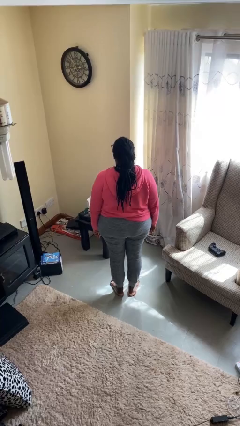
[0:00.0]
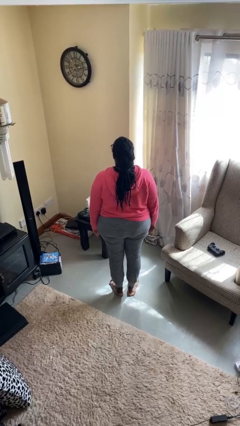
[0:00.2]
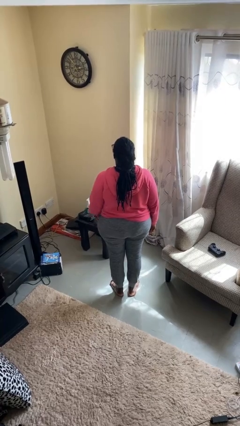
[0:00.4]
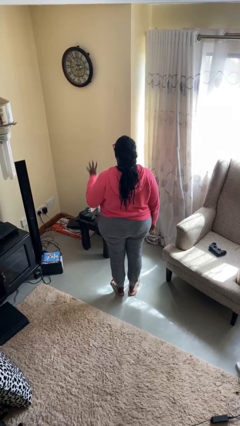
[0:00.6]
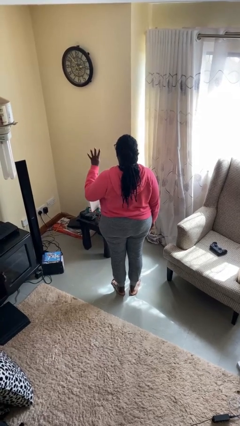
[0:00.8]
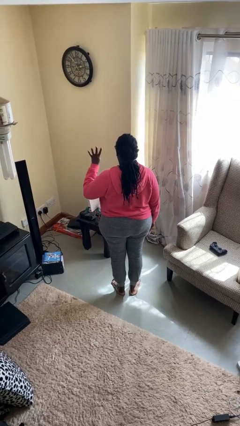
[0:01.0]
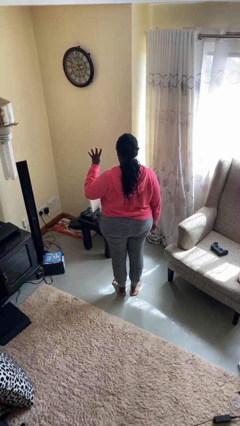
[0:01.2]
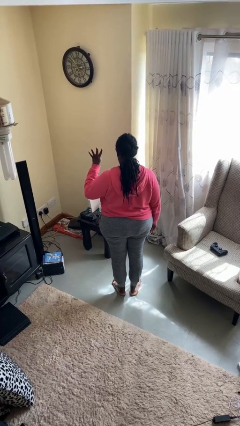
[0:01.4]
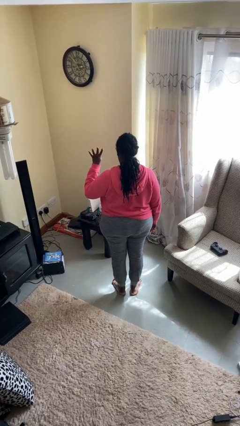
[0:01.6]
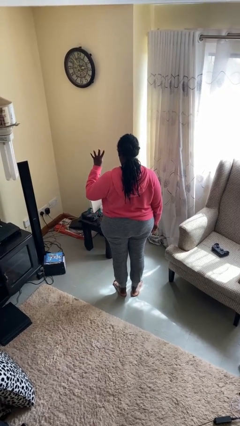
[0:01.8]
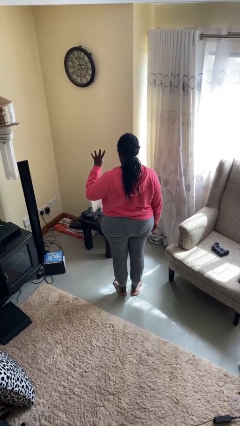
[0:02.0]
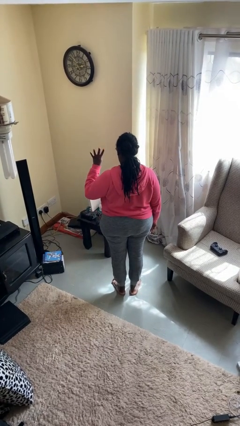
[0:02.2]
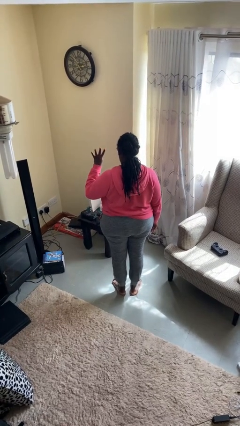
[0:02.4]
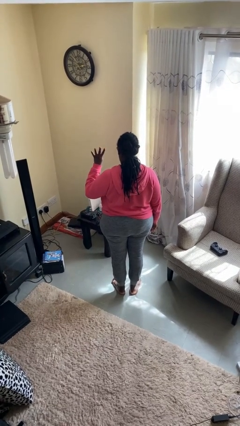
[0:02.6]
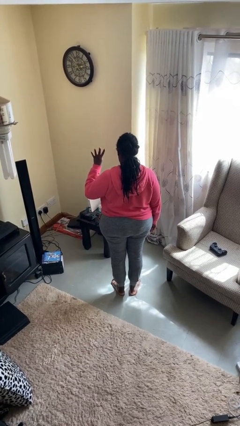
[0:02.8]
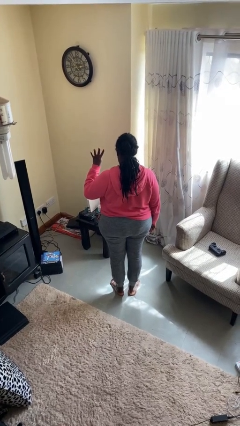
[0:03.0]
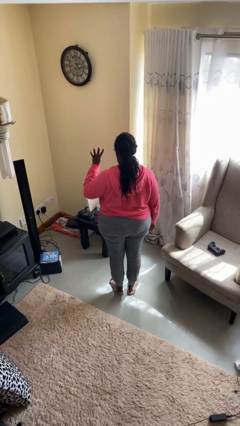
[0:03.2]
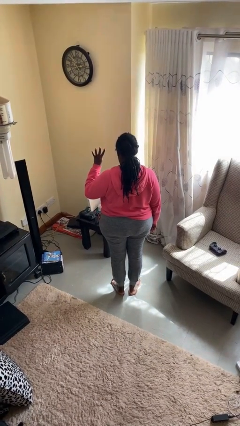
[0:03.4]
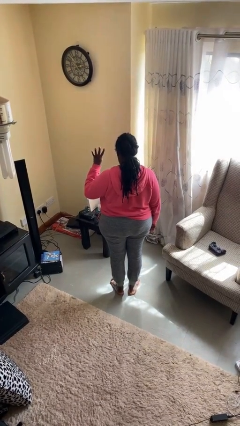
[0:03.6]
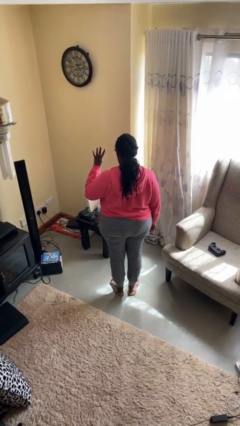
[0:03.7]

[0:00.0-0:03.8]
person gestures number four

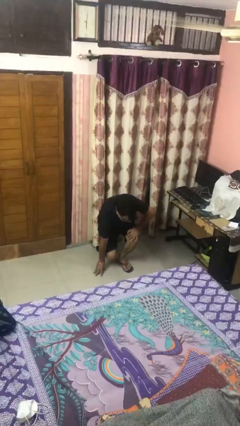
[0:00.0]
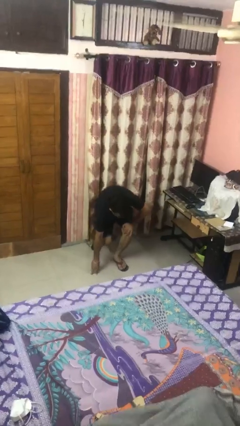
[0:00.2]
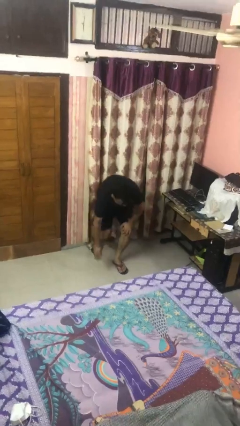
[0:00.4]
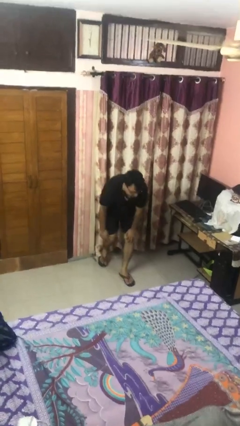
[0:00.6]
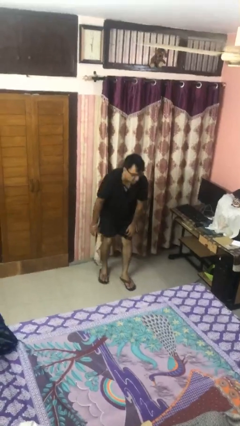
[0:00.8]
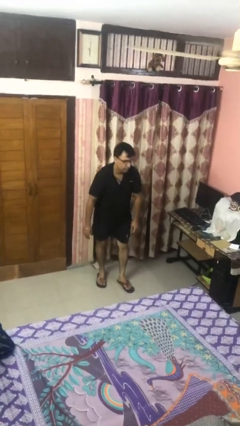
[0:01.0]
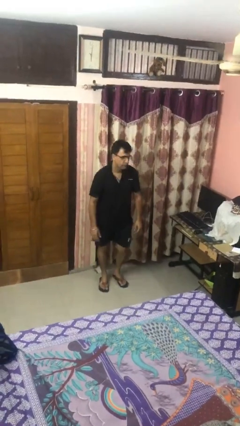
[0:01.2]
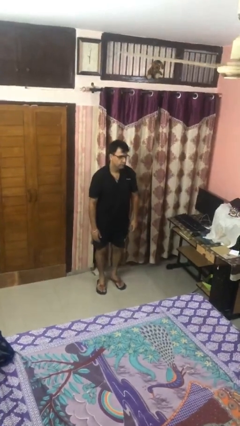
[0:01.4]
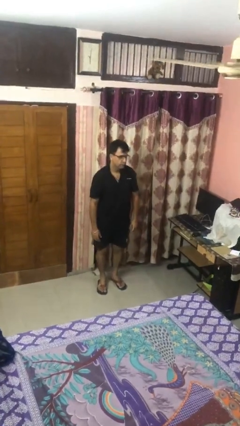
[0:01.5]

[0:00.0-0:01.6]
person stands up from floor

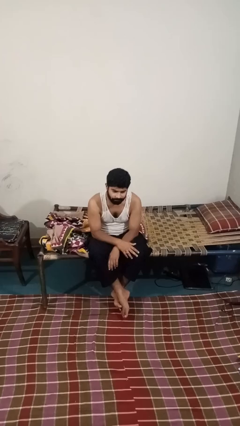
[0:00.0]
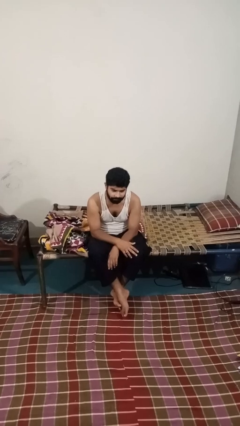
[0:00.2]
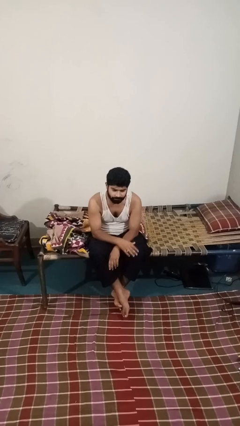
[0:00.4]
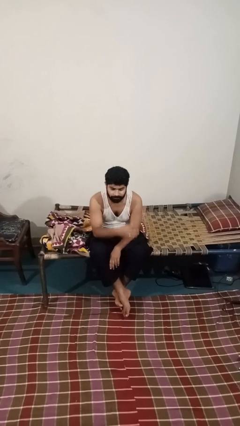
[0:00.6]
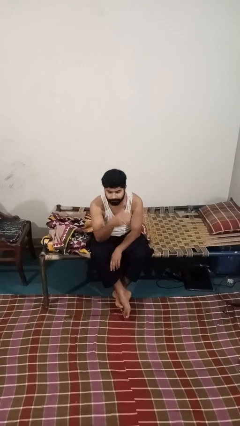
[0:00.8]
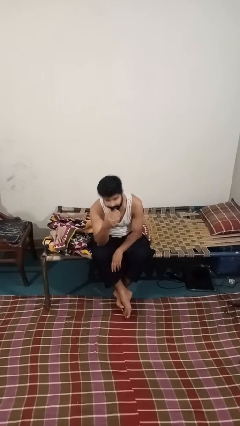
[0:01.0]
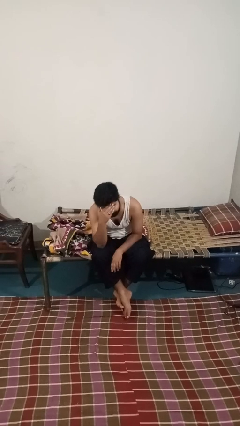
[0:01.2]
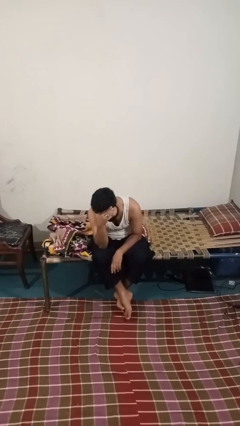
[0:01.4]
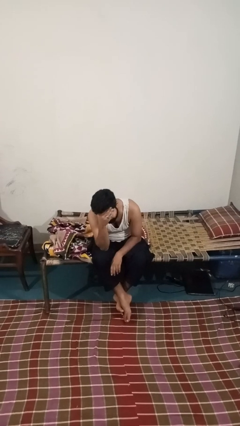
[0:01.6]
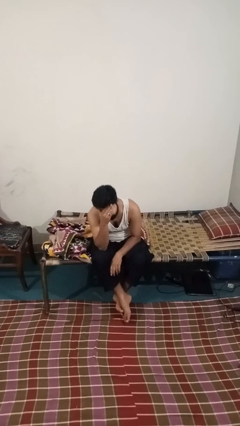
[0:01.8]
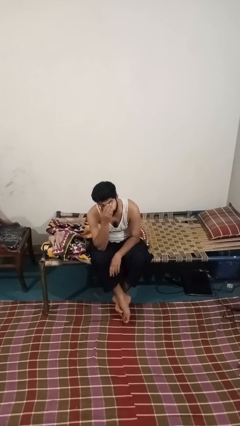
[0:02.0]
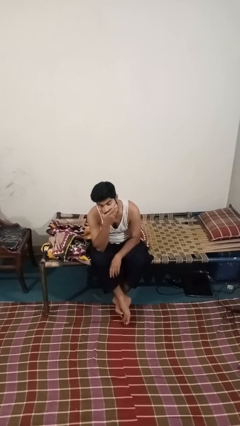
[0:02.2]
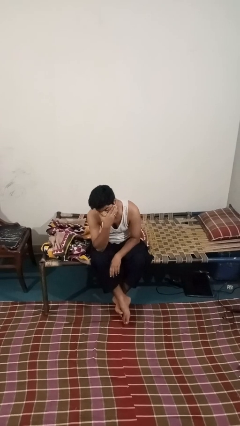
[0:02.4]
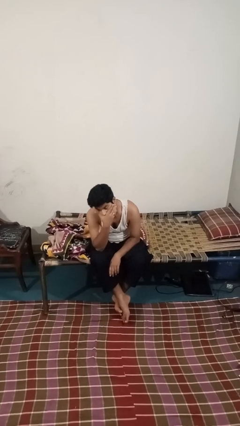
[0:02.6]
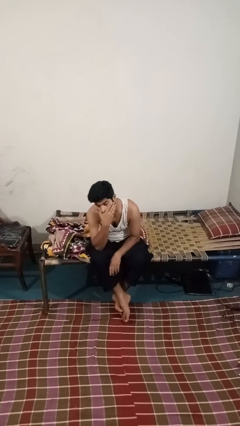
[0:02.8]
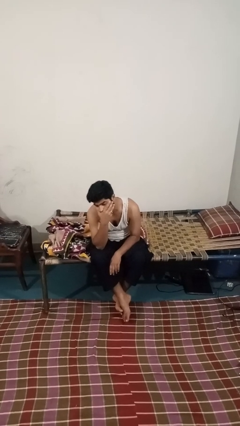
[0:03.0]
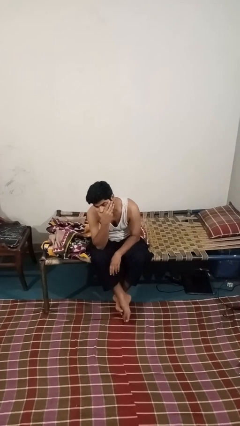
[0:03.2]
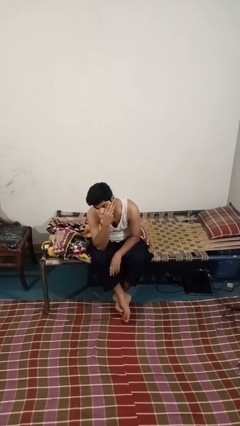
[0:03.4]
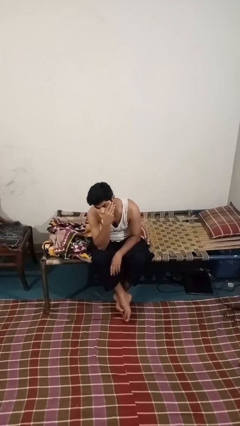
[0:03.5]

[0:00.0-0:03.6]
person covers face with hands

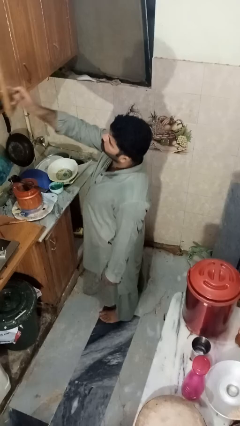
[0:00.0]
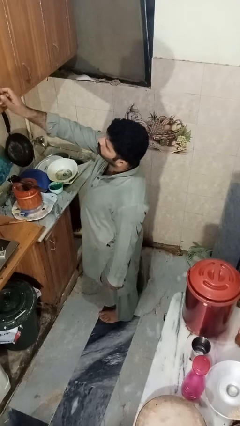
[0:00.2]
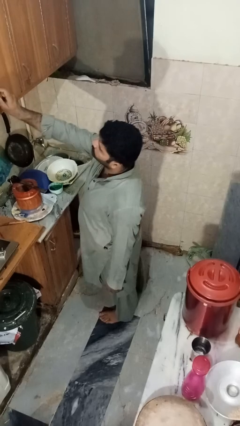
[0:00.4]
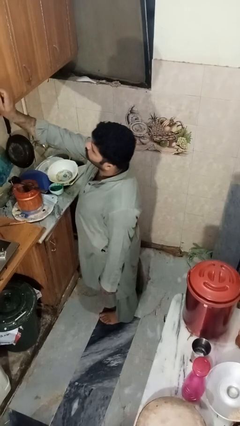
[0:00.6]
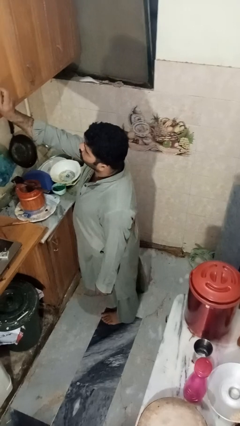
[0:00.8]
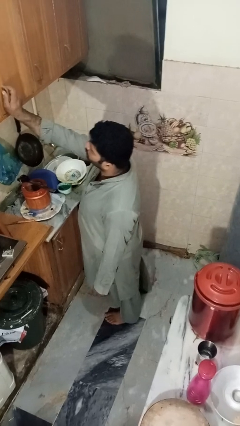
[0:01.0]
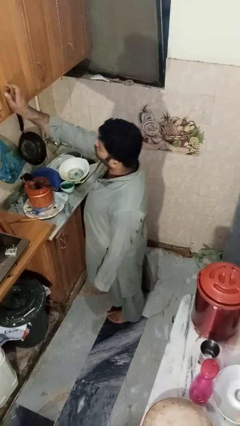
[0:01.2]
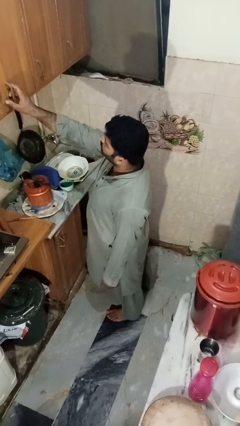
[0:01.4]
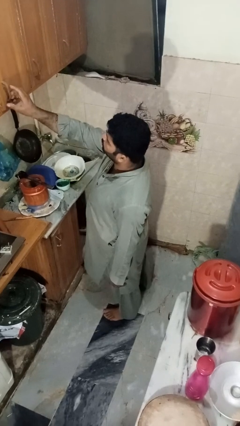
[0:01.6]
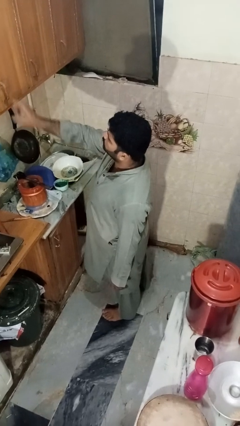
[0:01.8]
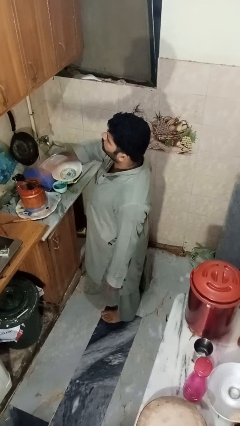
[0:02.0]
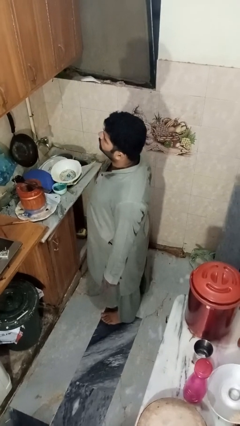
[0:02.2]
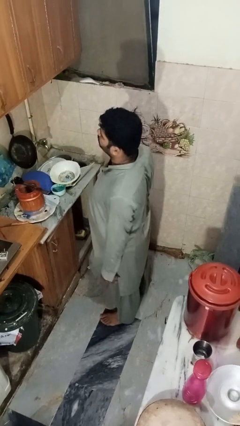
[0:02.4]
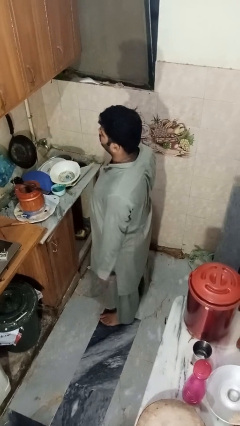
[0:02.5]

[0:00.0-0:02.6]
person closes cabinet

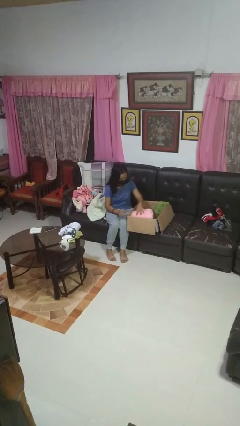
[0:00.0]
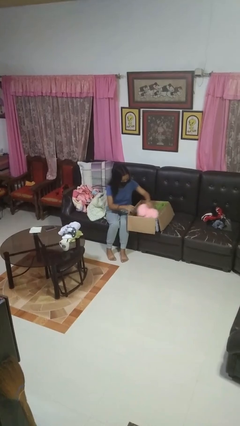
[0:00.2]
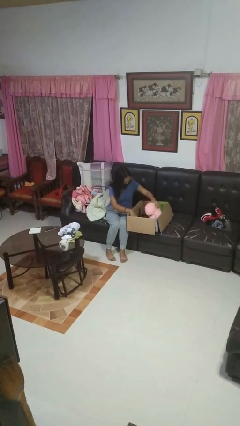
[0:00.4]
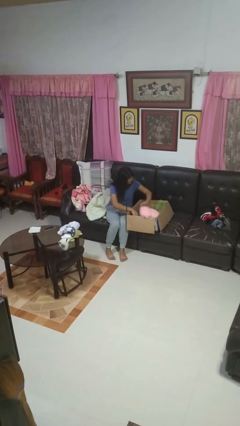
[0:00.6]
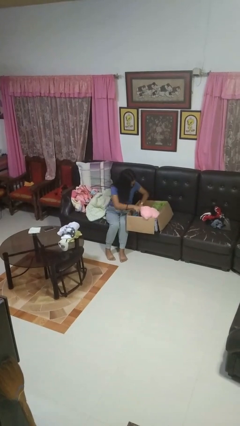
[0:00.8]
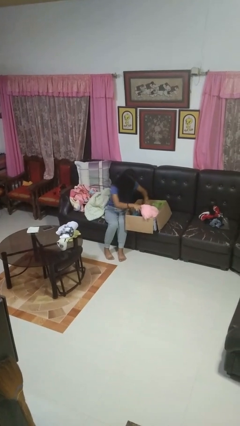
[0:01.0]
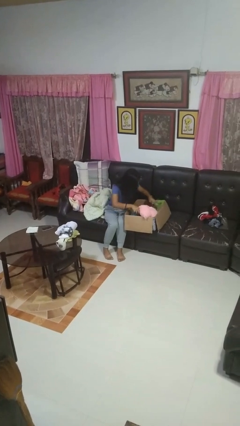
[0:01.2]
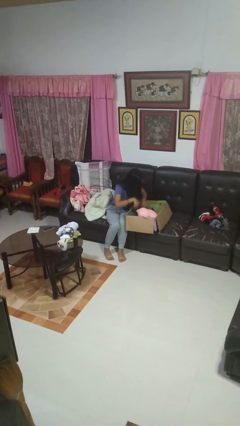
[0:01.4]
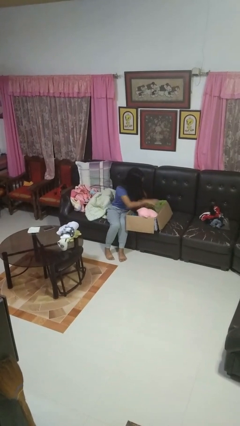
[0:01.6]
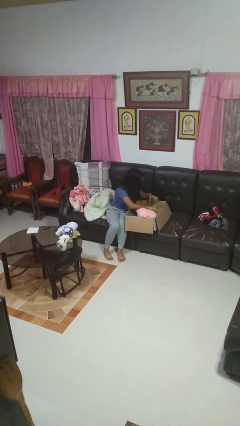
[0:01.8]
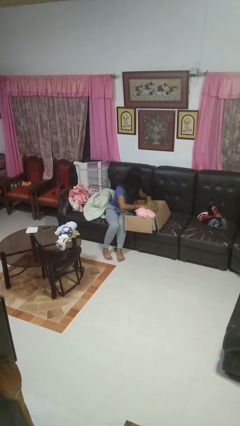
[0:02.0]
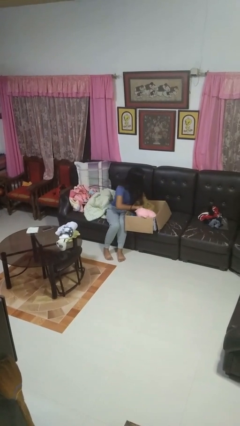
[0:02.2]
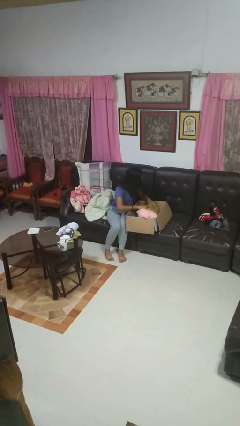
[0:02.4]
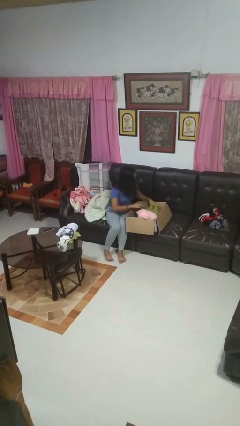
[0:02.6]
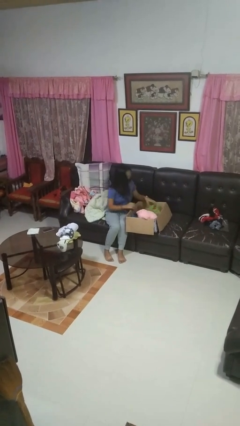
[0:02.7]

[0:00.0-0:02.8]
person searches in box

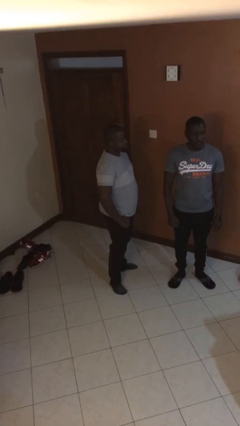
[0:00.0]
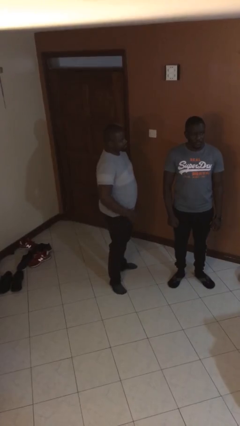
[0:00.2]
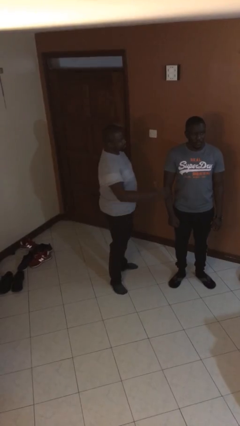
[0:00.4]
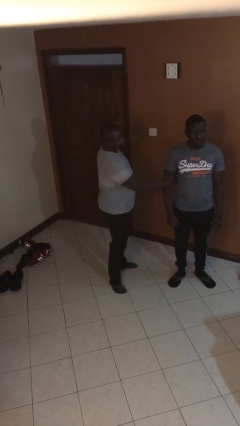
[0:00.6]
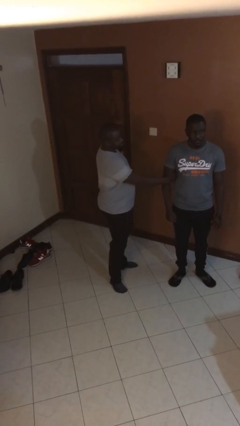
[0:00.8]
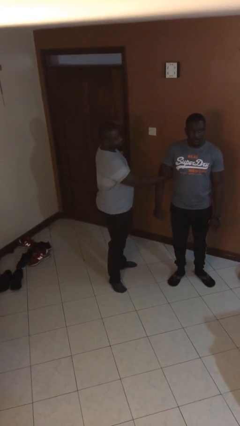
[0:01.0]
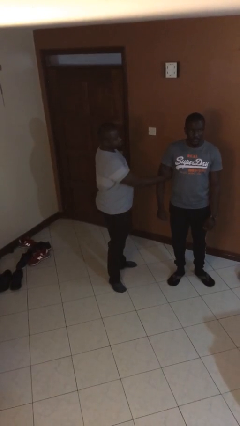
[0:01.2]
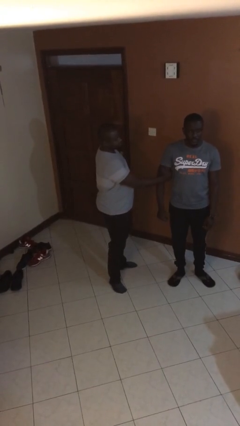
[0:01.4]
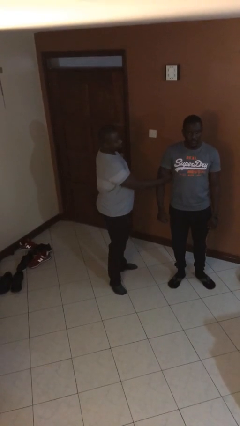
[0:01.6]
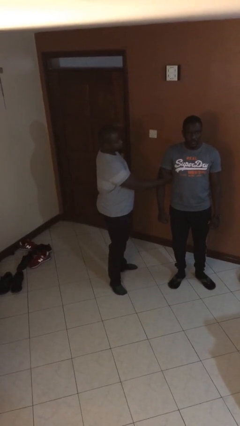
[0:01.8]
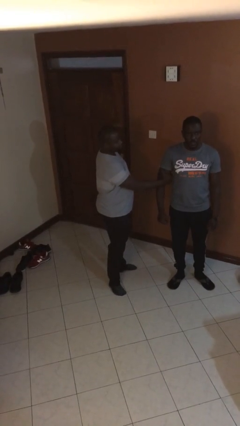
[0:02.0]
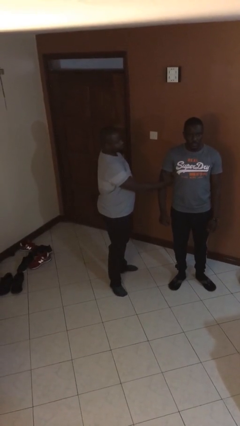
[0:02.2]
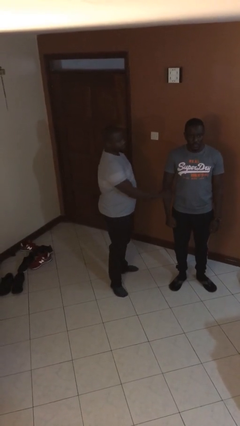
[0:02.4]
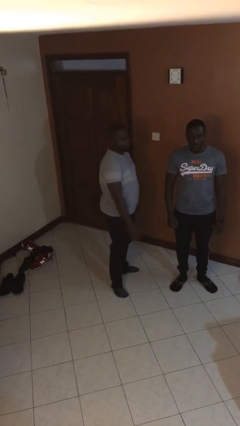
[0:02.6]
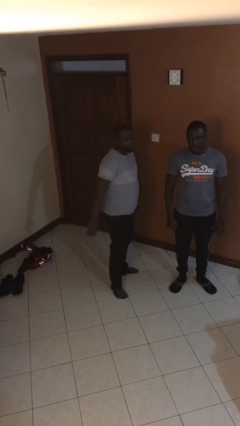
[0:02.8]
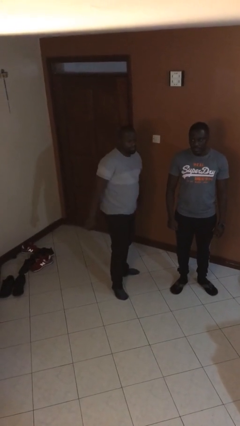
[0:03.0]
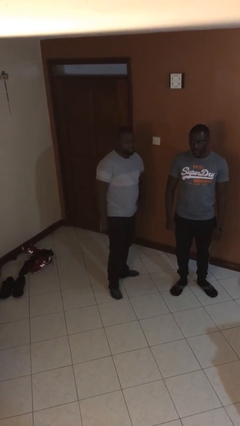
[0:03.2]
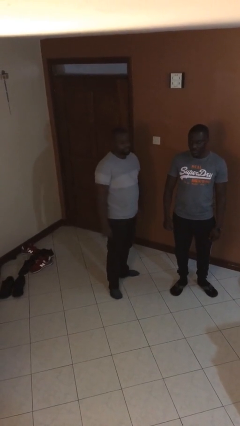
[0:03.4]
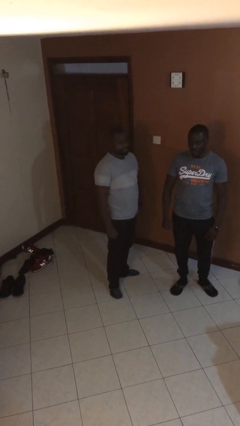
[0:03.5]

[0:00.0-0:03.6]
person grabs person by bicep
